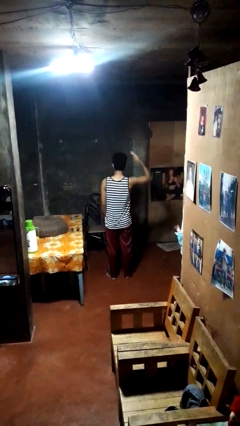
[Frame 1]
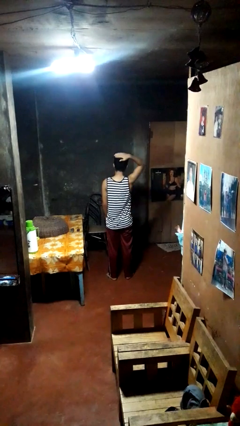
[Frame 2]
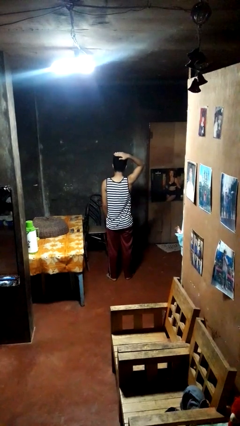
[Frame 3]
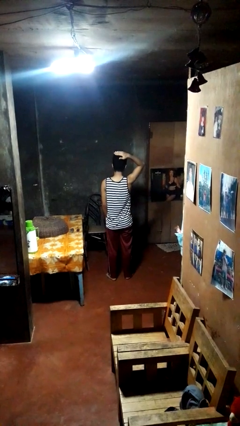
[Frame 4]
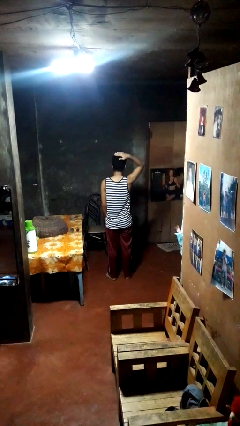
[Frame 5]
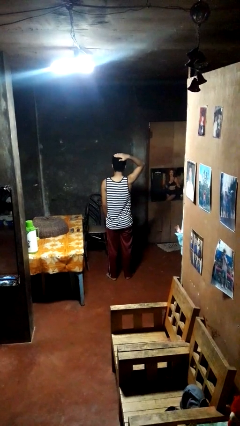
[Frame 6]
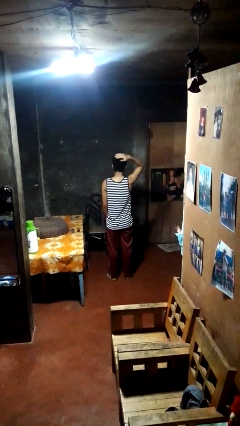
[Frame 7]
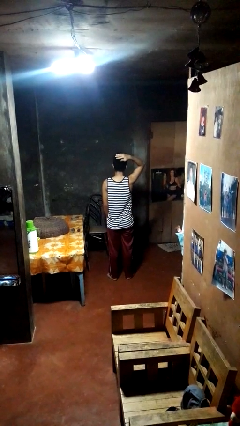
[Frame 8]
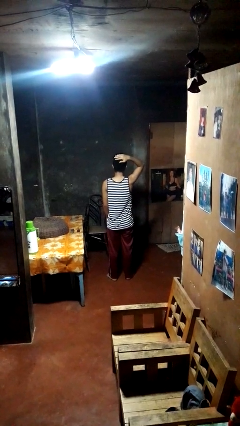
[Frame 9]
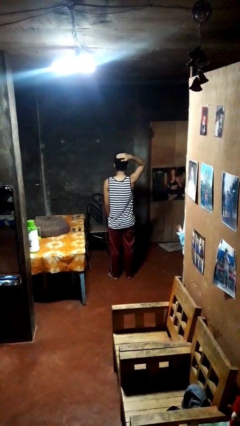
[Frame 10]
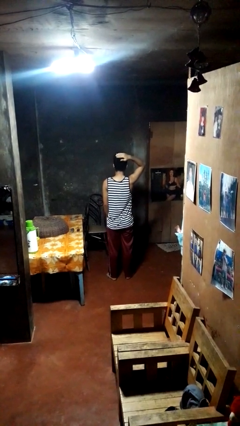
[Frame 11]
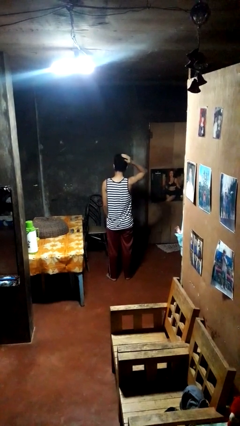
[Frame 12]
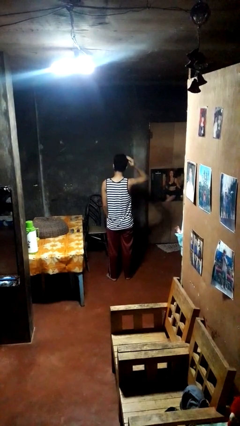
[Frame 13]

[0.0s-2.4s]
person pats head

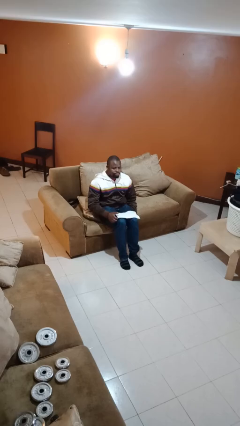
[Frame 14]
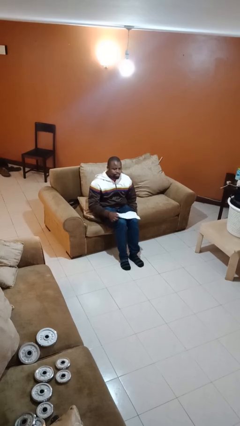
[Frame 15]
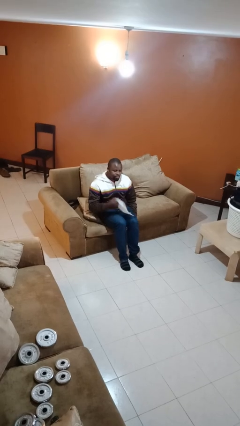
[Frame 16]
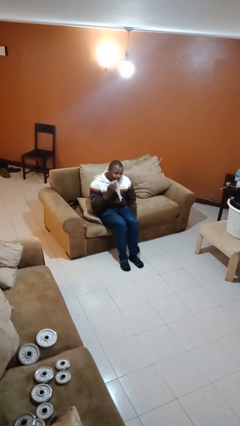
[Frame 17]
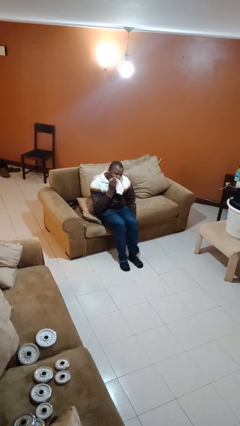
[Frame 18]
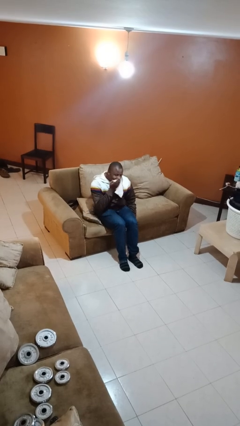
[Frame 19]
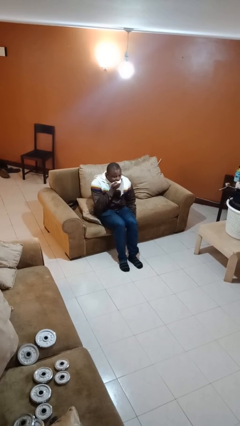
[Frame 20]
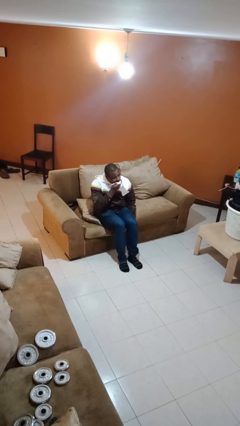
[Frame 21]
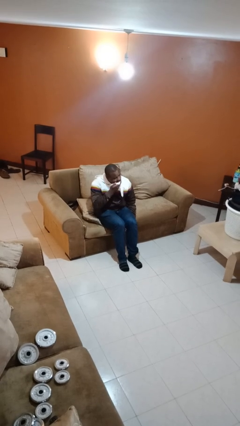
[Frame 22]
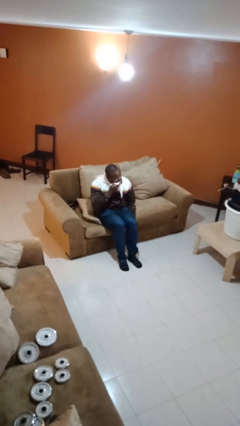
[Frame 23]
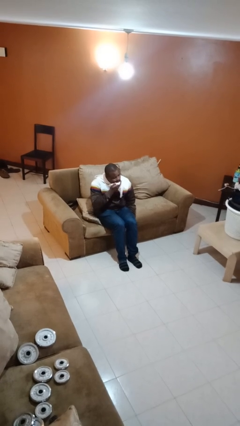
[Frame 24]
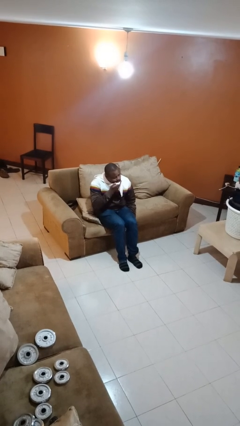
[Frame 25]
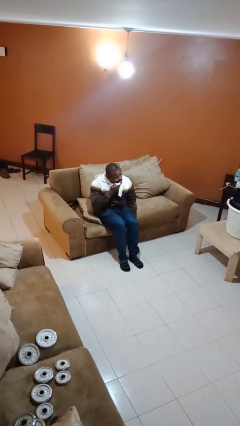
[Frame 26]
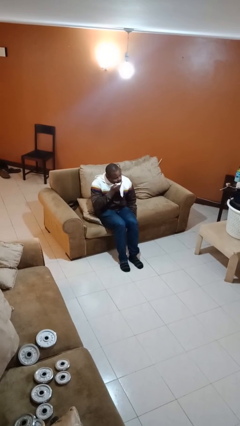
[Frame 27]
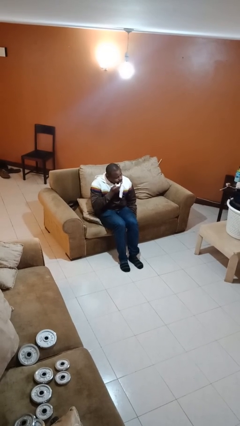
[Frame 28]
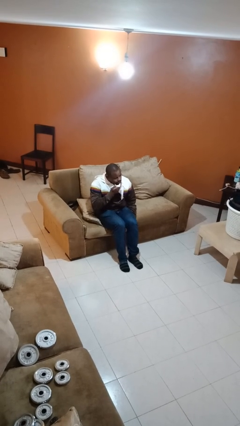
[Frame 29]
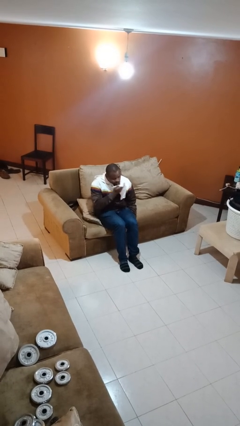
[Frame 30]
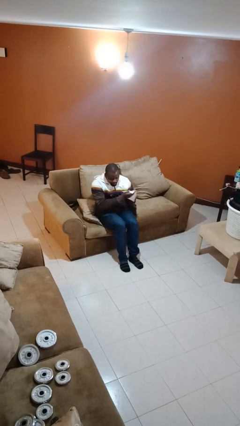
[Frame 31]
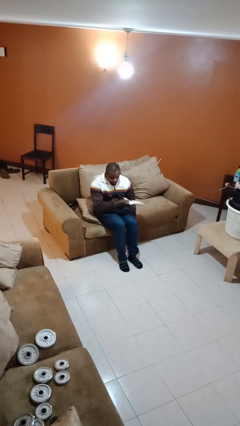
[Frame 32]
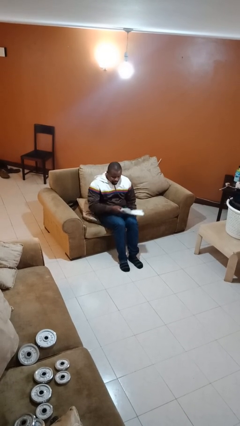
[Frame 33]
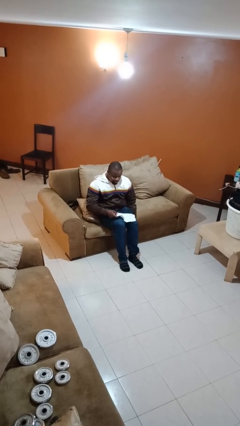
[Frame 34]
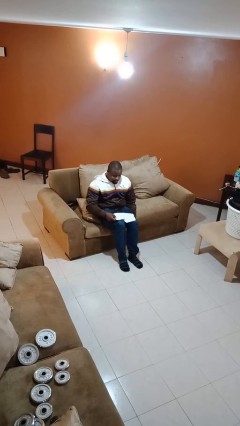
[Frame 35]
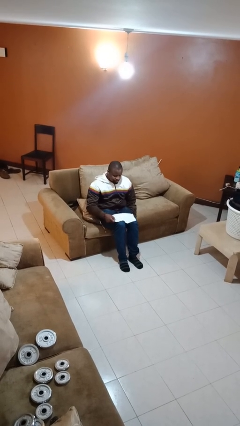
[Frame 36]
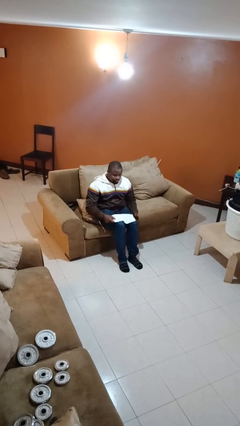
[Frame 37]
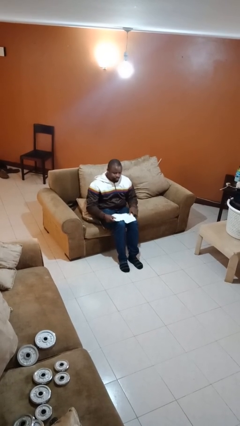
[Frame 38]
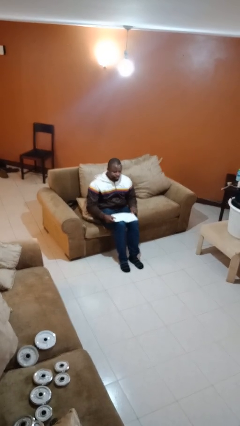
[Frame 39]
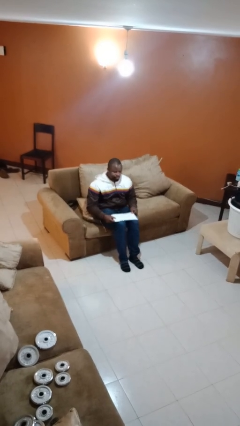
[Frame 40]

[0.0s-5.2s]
person wipes mouth with napkin

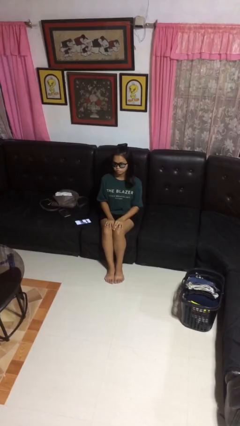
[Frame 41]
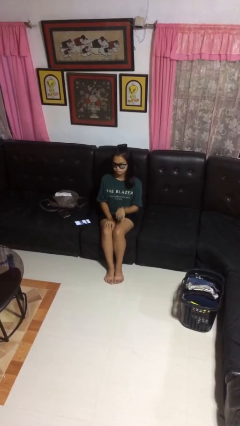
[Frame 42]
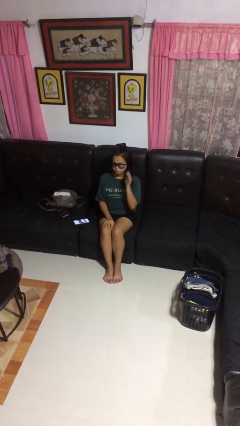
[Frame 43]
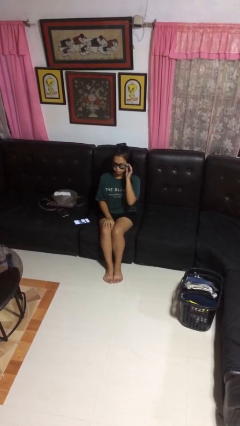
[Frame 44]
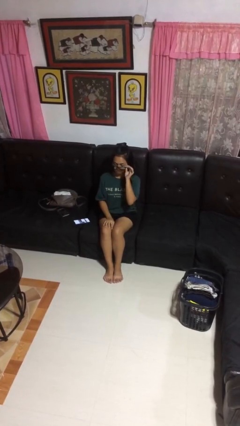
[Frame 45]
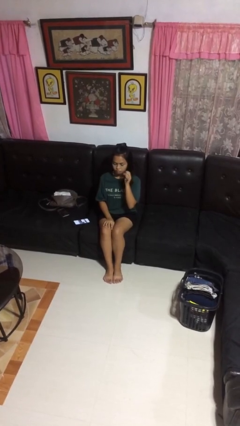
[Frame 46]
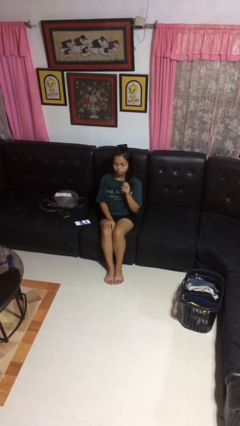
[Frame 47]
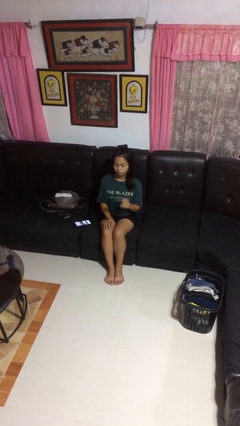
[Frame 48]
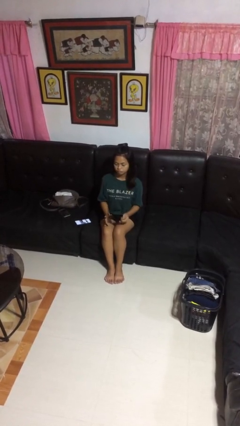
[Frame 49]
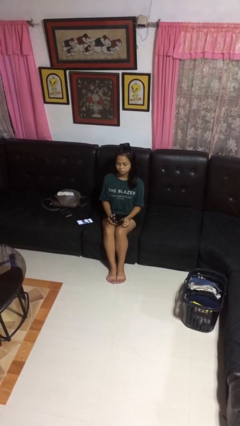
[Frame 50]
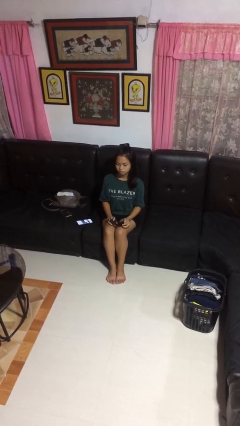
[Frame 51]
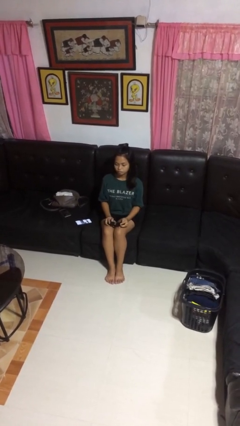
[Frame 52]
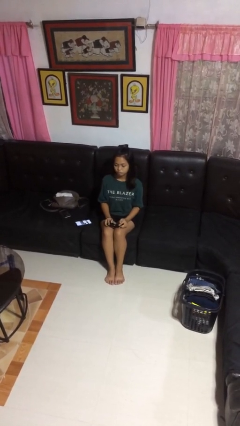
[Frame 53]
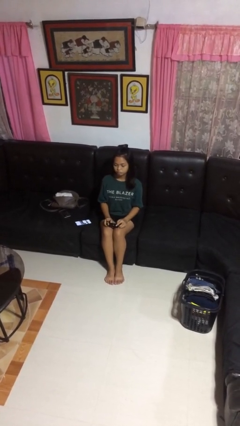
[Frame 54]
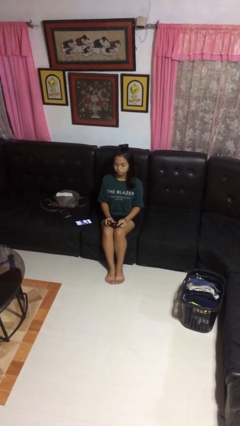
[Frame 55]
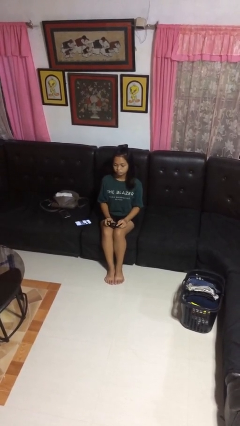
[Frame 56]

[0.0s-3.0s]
person takes off sunglasses

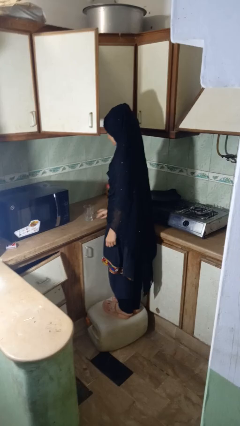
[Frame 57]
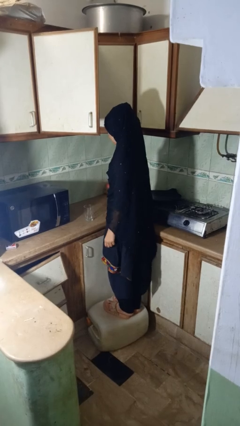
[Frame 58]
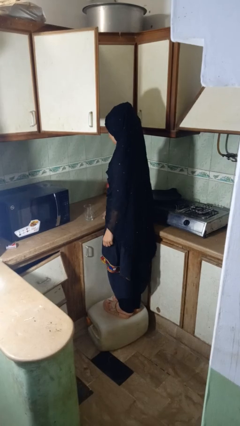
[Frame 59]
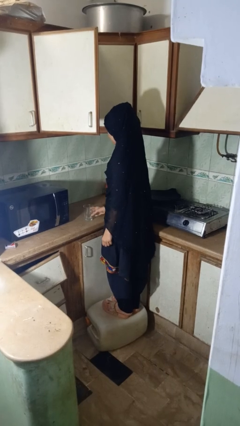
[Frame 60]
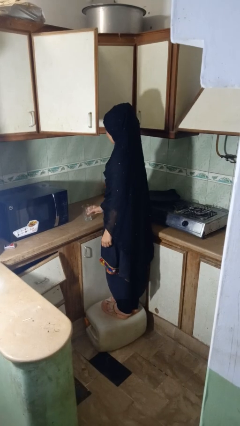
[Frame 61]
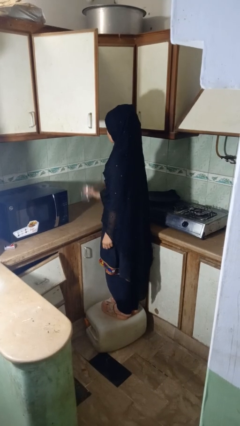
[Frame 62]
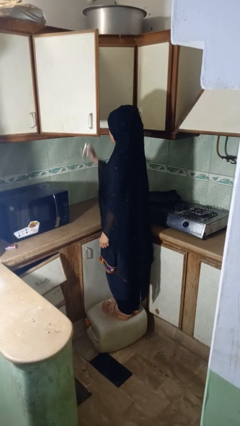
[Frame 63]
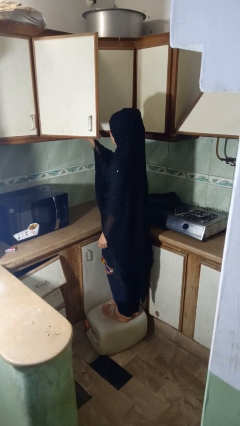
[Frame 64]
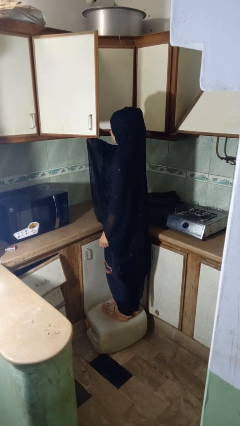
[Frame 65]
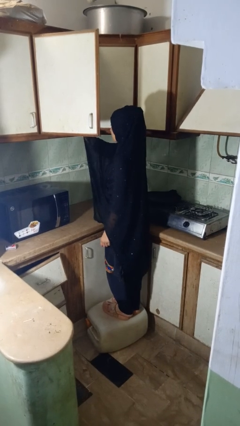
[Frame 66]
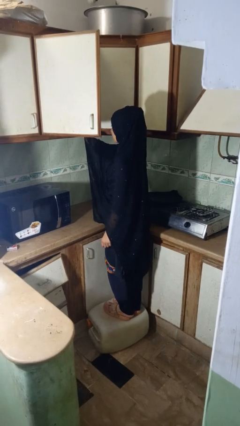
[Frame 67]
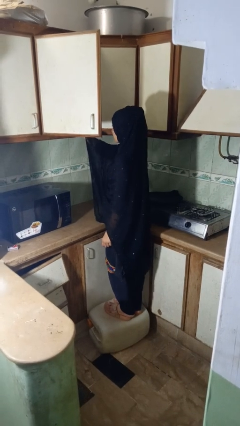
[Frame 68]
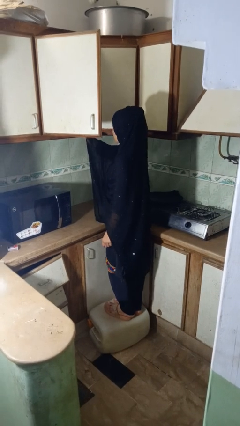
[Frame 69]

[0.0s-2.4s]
person picks up object from cabinet

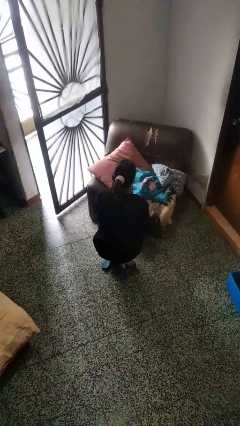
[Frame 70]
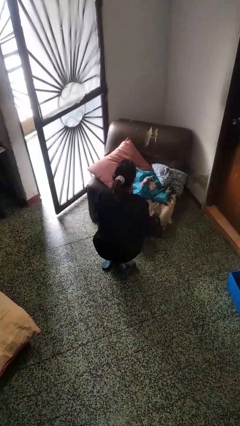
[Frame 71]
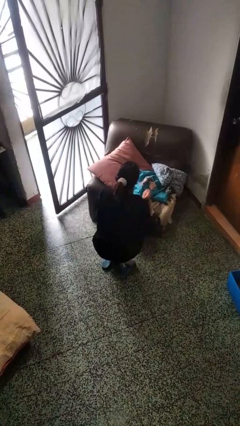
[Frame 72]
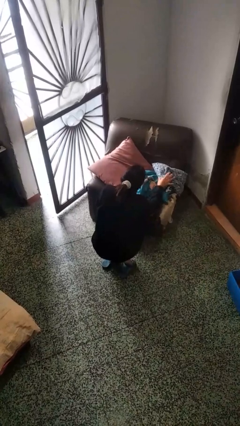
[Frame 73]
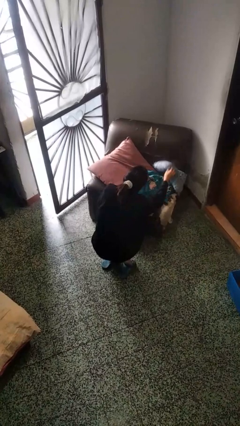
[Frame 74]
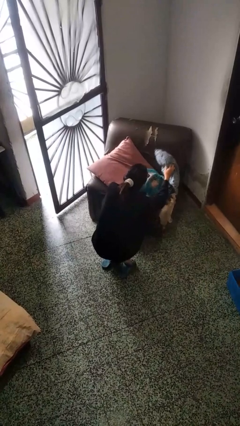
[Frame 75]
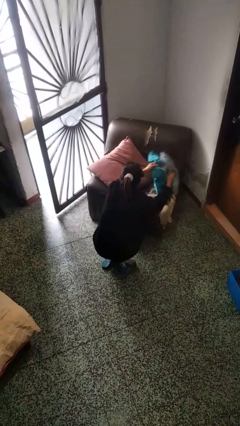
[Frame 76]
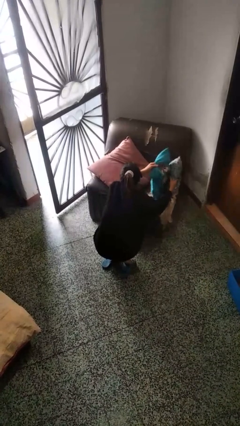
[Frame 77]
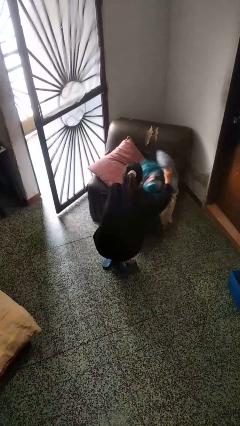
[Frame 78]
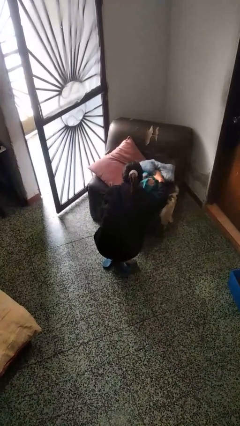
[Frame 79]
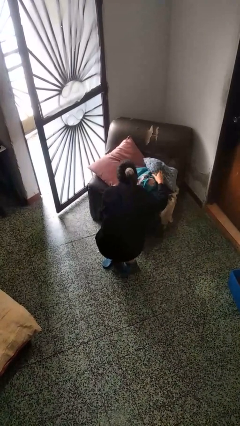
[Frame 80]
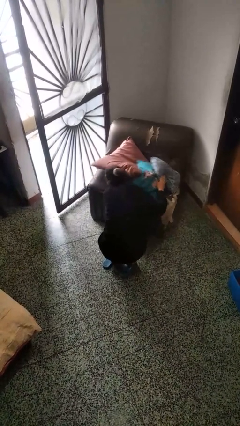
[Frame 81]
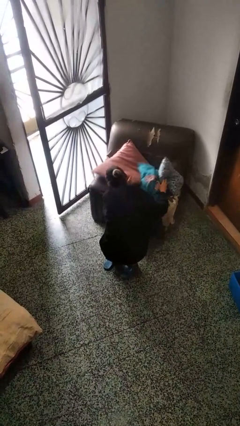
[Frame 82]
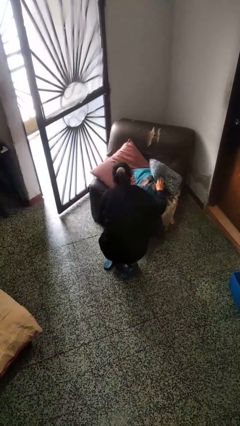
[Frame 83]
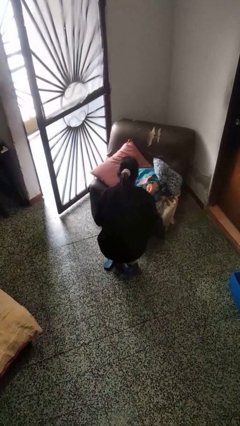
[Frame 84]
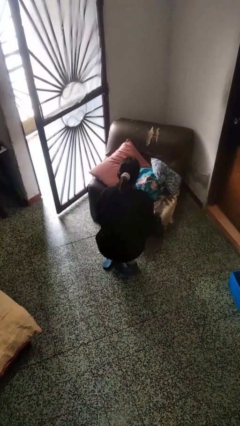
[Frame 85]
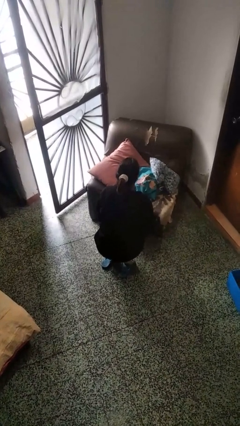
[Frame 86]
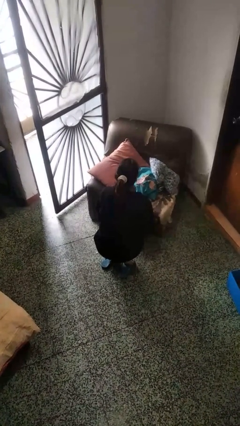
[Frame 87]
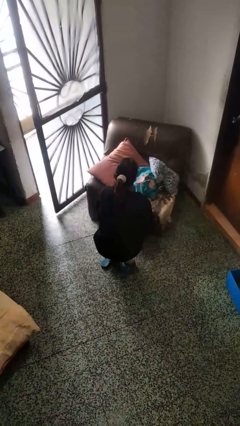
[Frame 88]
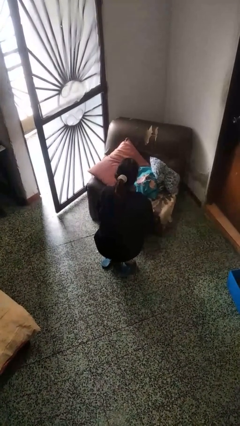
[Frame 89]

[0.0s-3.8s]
person searches in couch

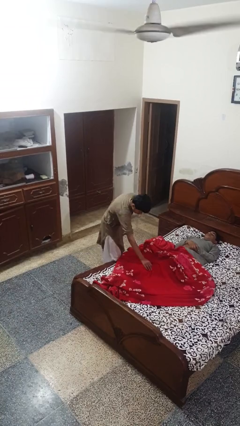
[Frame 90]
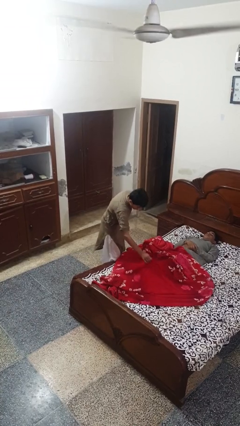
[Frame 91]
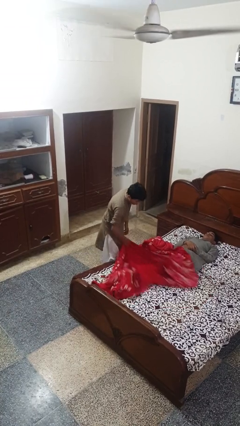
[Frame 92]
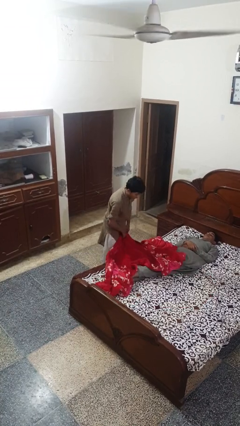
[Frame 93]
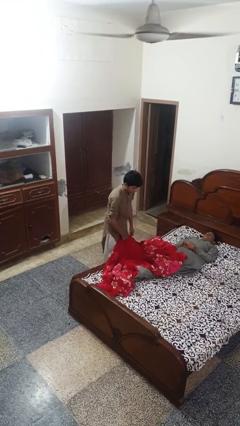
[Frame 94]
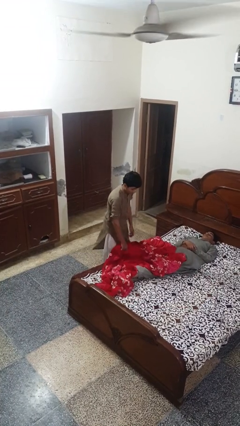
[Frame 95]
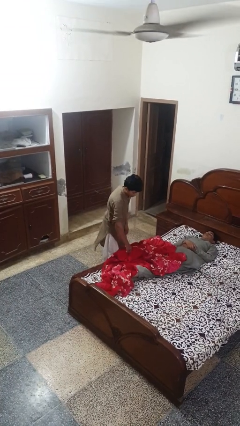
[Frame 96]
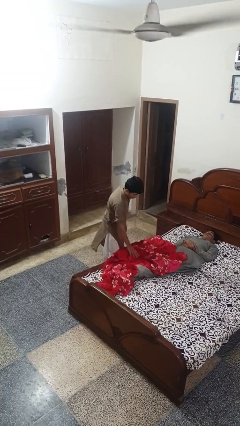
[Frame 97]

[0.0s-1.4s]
person uncovers friend with blanket
